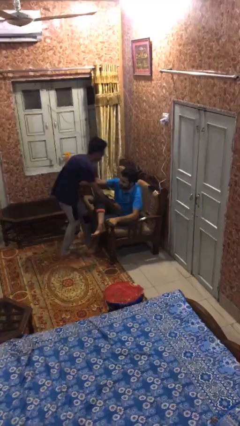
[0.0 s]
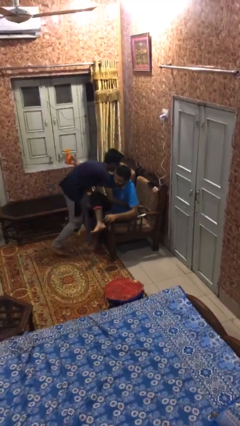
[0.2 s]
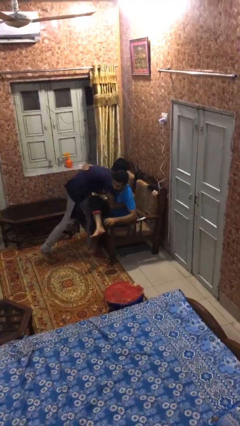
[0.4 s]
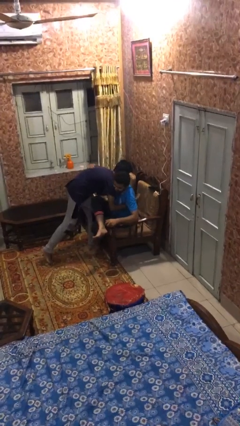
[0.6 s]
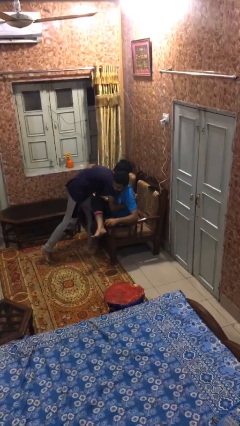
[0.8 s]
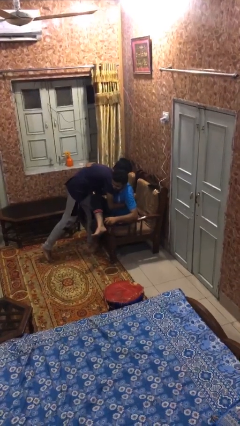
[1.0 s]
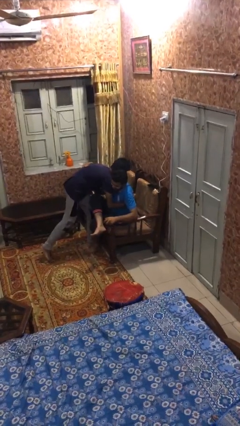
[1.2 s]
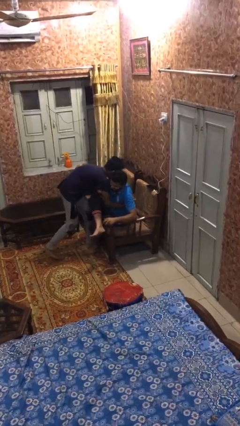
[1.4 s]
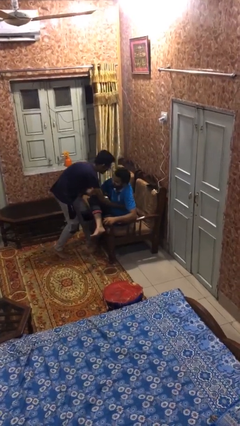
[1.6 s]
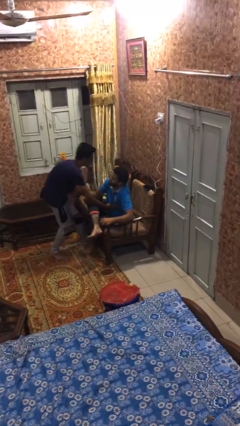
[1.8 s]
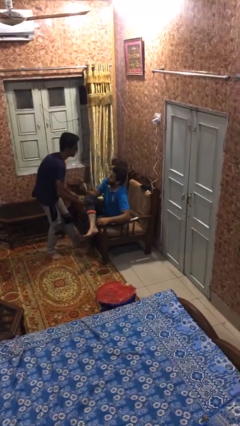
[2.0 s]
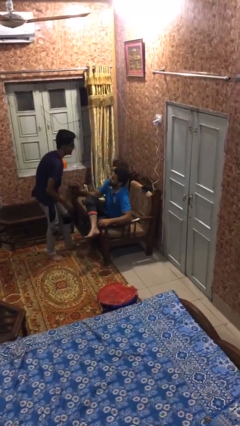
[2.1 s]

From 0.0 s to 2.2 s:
person embraces person

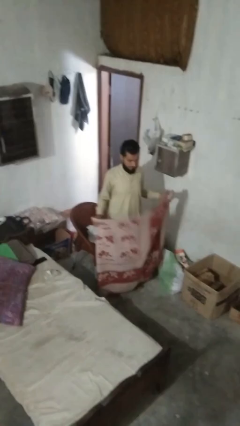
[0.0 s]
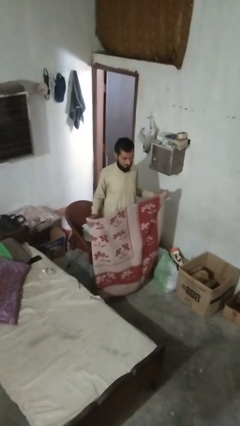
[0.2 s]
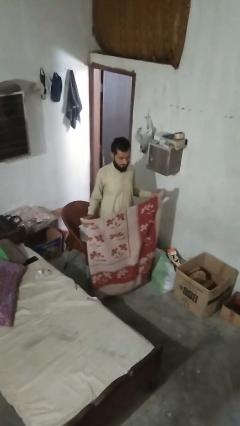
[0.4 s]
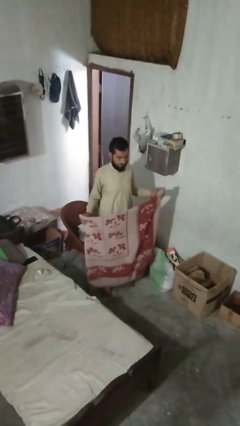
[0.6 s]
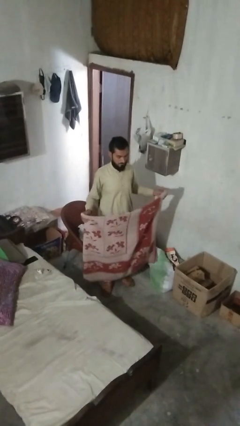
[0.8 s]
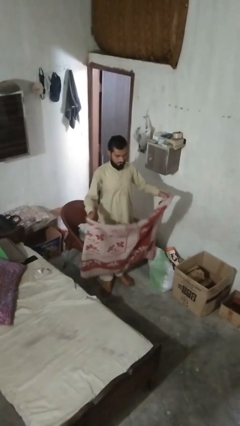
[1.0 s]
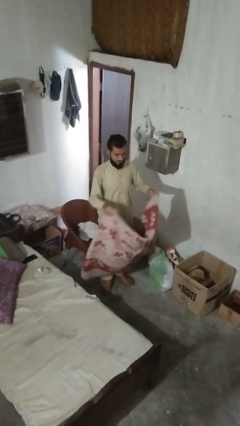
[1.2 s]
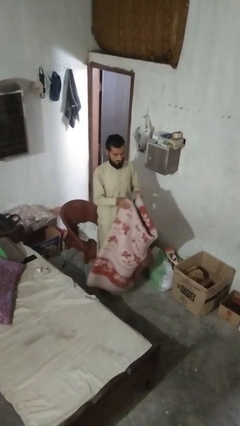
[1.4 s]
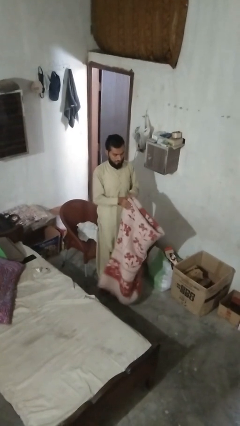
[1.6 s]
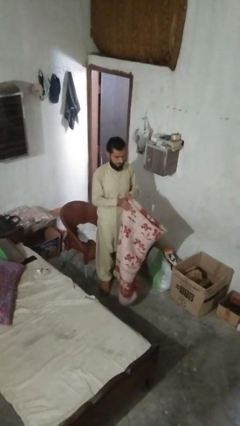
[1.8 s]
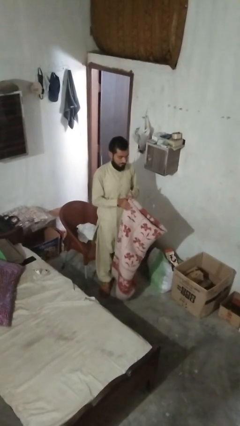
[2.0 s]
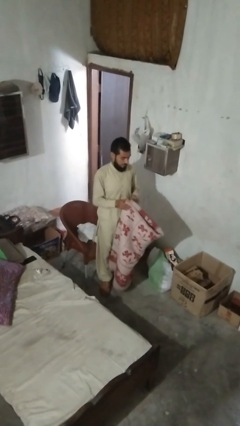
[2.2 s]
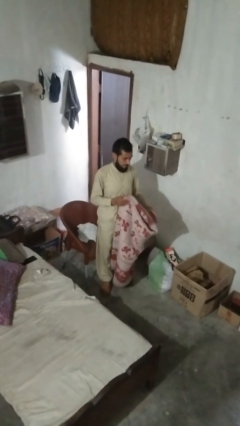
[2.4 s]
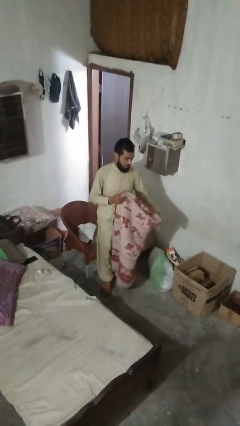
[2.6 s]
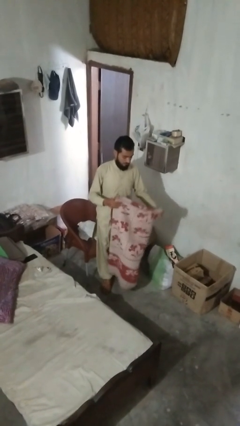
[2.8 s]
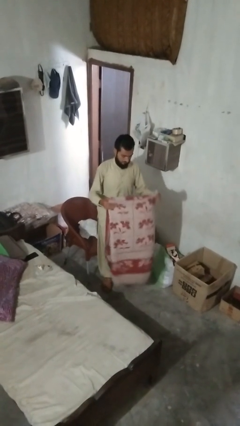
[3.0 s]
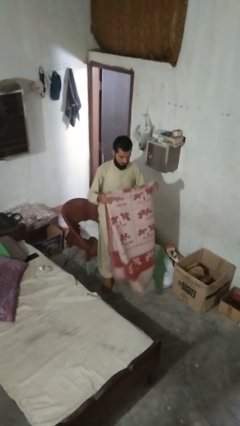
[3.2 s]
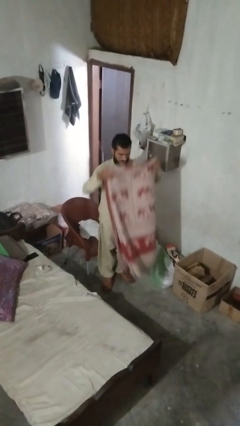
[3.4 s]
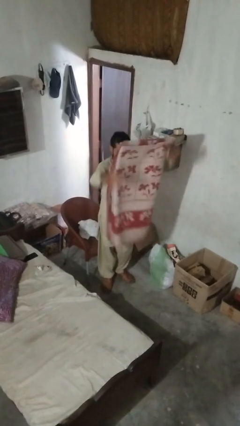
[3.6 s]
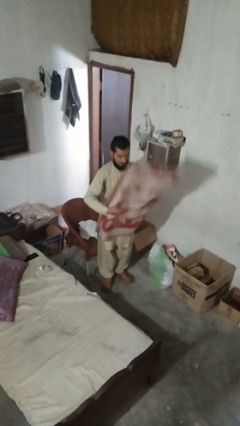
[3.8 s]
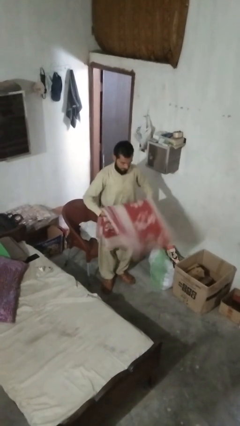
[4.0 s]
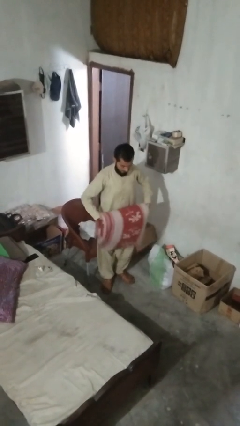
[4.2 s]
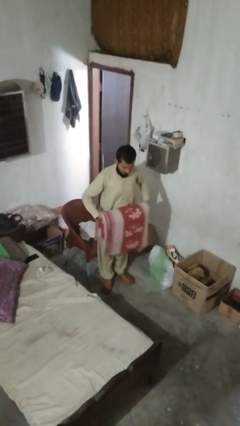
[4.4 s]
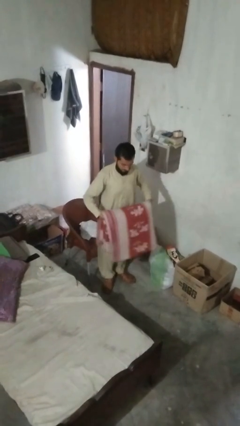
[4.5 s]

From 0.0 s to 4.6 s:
person folds blanket

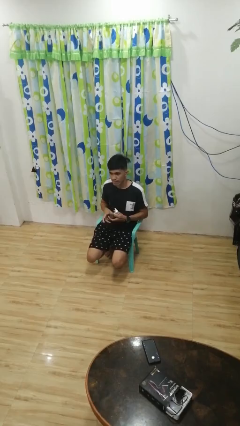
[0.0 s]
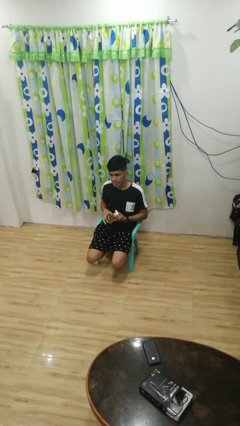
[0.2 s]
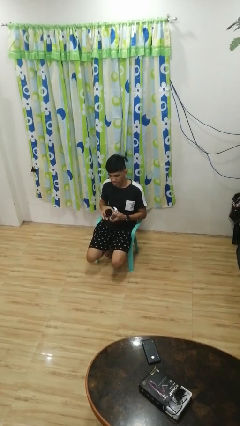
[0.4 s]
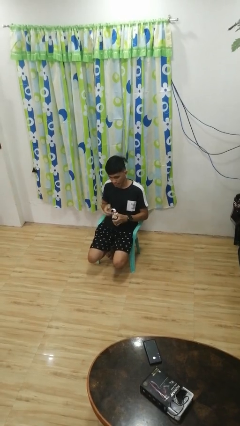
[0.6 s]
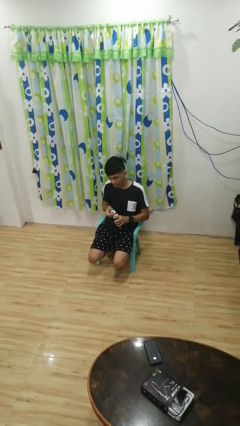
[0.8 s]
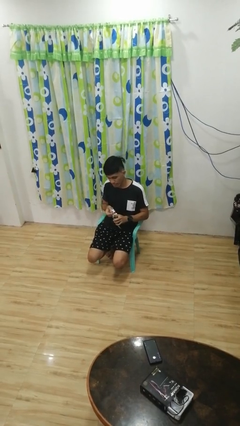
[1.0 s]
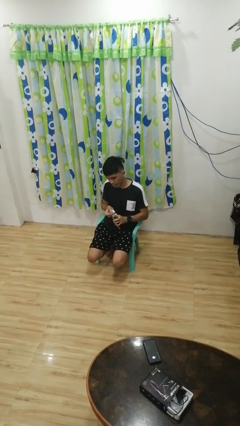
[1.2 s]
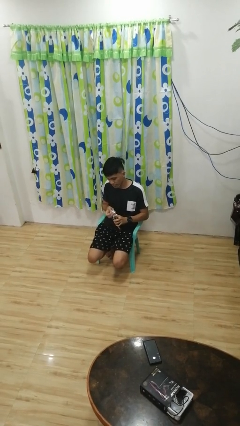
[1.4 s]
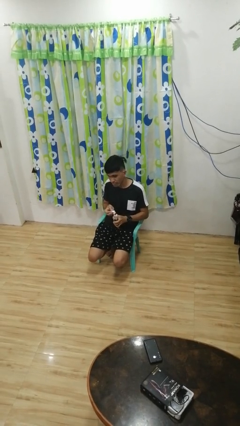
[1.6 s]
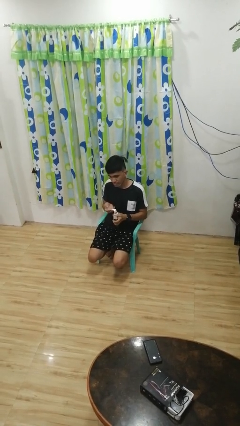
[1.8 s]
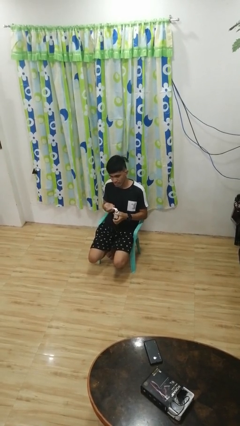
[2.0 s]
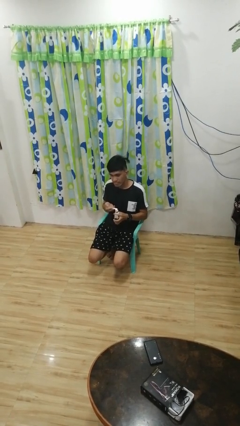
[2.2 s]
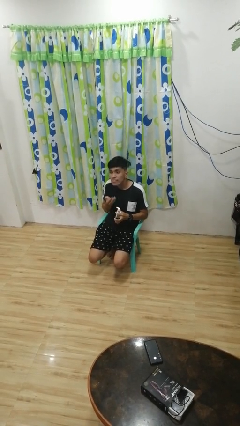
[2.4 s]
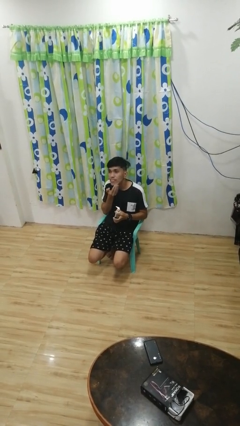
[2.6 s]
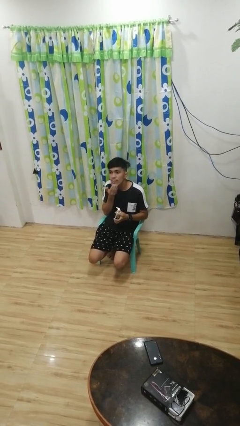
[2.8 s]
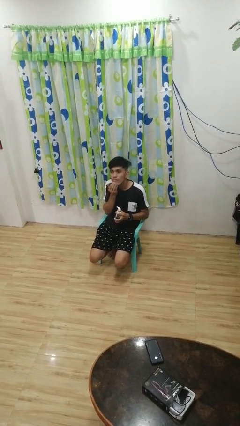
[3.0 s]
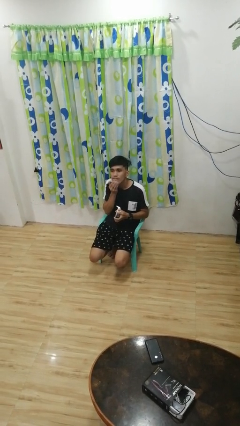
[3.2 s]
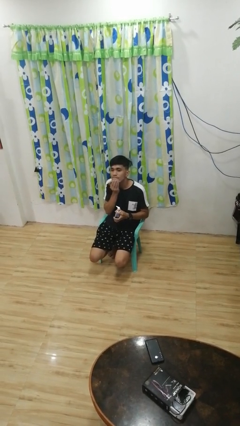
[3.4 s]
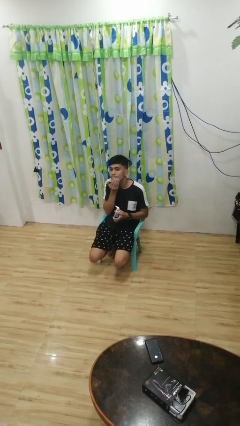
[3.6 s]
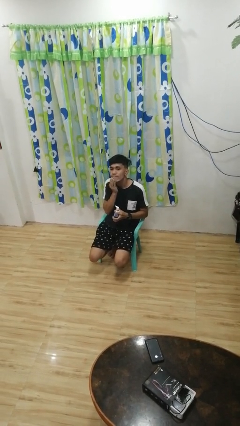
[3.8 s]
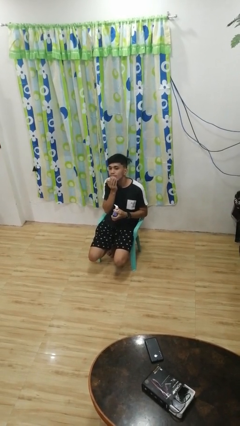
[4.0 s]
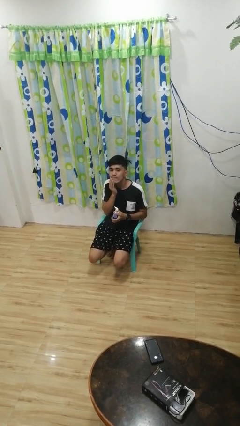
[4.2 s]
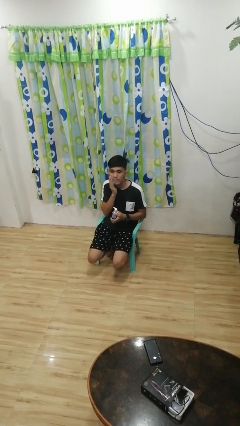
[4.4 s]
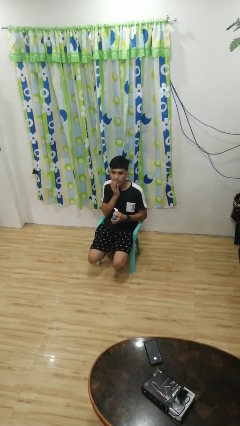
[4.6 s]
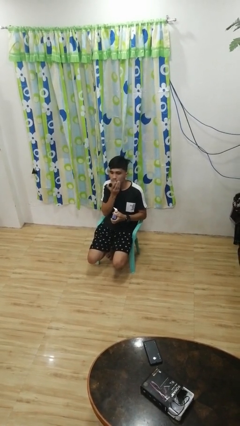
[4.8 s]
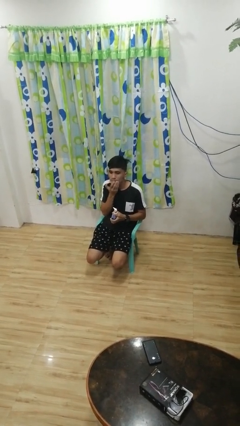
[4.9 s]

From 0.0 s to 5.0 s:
person applies shaving cream

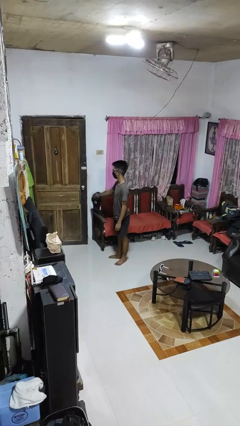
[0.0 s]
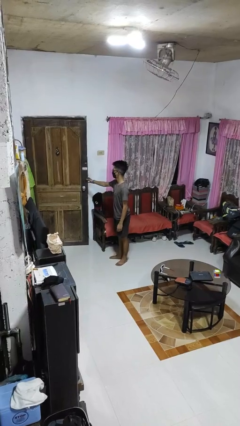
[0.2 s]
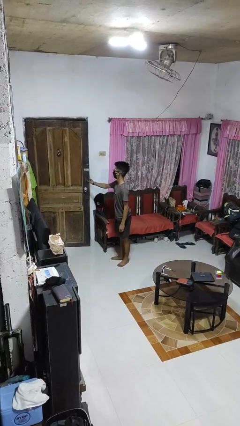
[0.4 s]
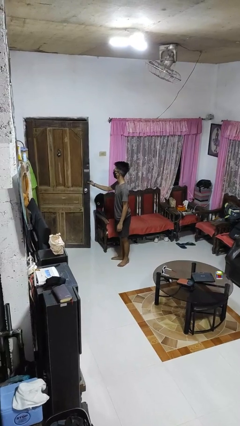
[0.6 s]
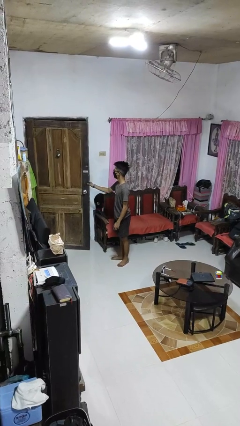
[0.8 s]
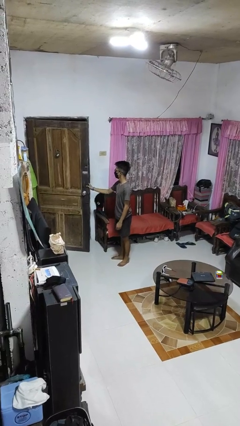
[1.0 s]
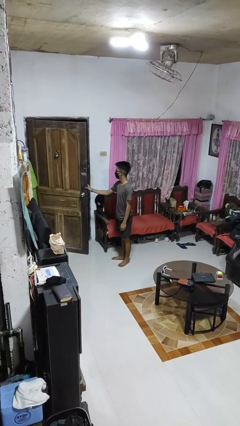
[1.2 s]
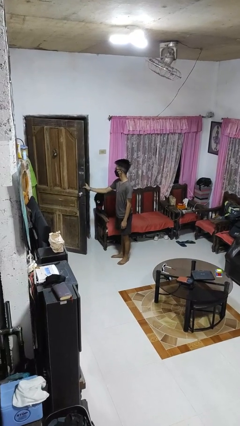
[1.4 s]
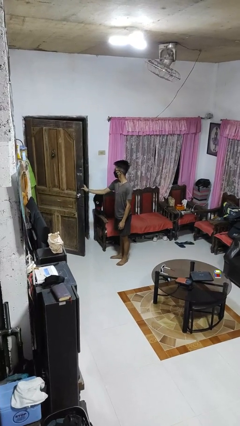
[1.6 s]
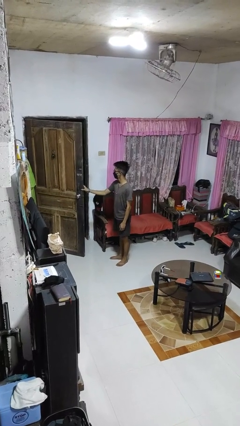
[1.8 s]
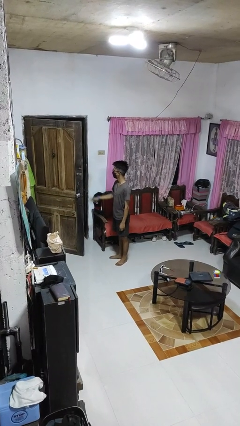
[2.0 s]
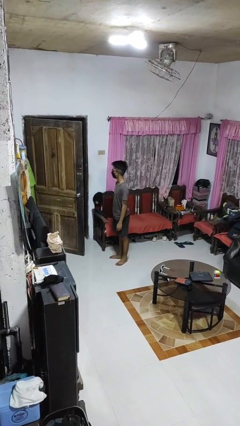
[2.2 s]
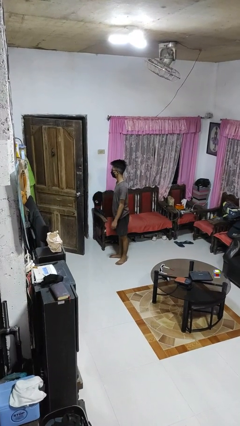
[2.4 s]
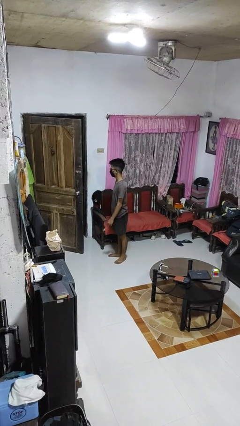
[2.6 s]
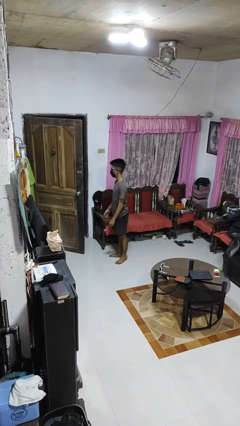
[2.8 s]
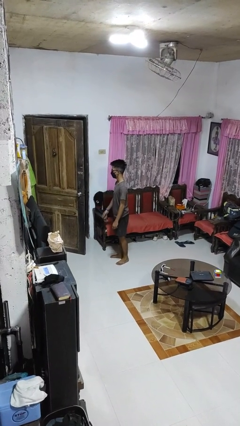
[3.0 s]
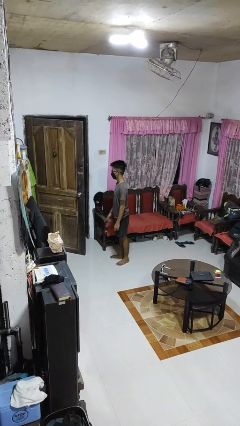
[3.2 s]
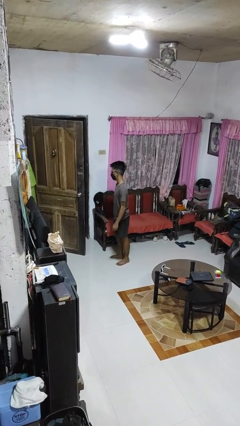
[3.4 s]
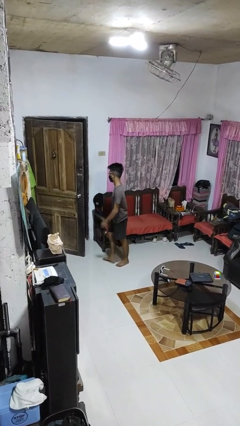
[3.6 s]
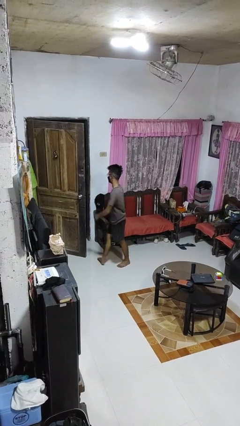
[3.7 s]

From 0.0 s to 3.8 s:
person opens facility door

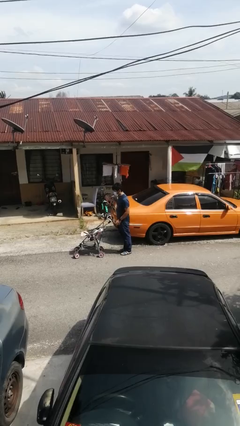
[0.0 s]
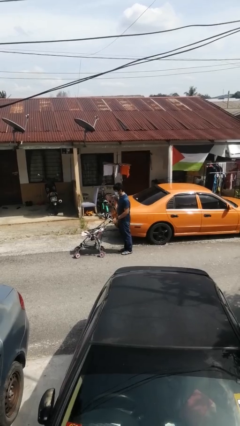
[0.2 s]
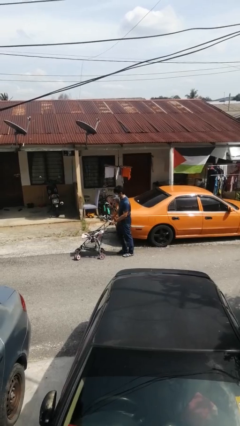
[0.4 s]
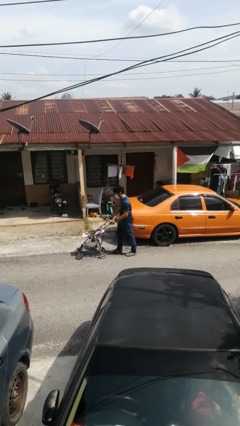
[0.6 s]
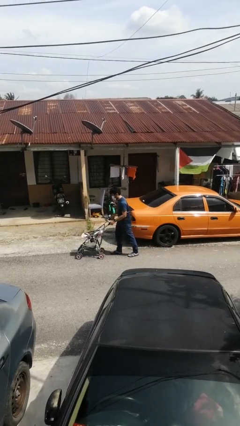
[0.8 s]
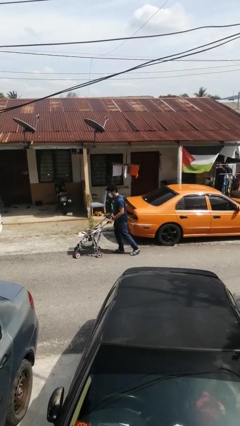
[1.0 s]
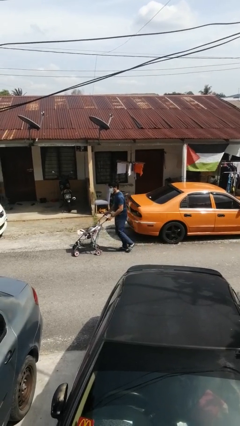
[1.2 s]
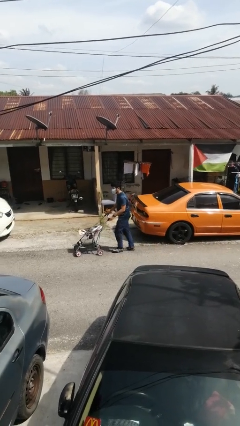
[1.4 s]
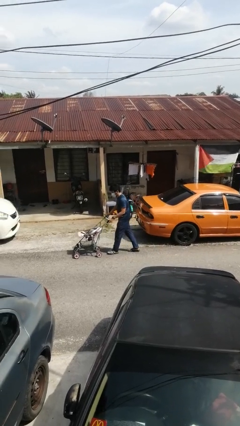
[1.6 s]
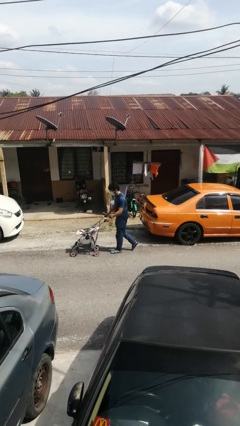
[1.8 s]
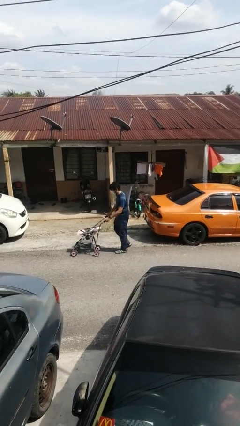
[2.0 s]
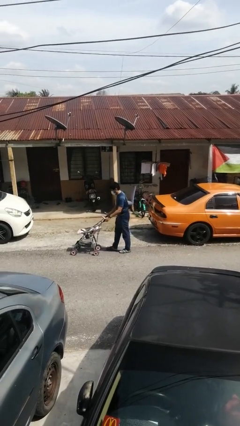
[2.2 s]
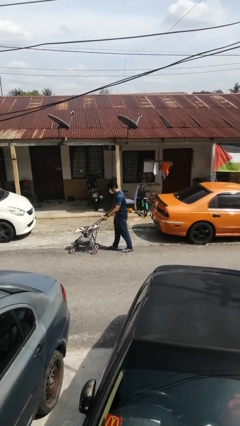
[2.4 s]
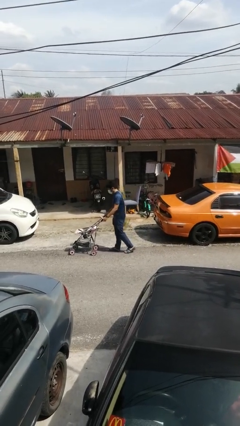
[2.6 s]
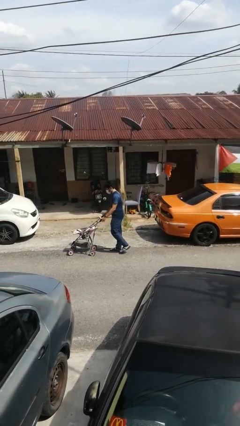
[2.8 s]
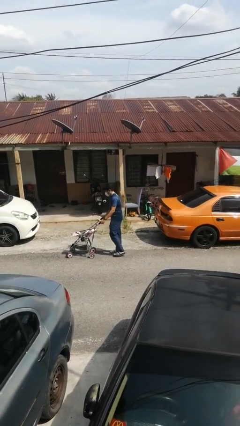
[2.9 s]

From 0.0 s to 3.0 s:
person pushes wheeled cart
